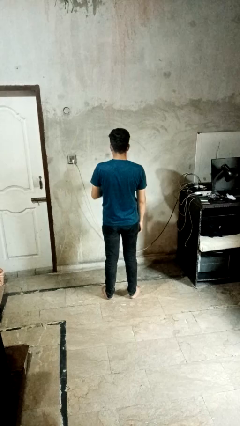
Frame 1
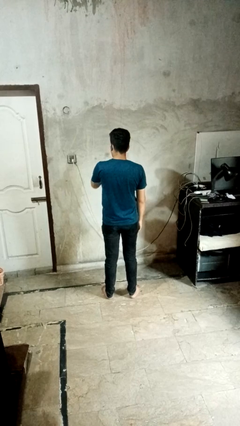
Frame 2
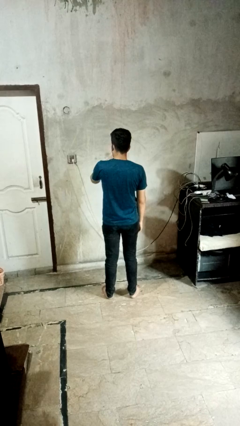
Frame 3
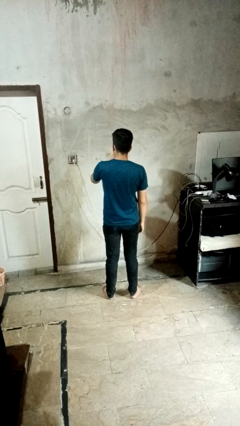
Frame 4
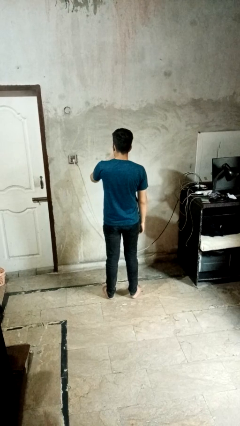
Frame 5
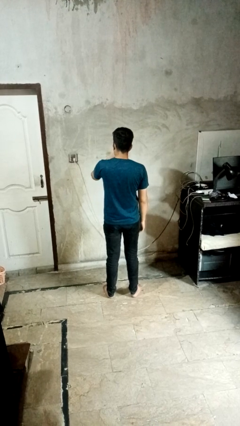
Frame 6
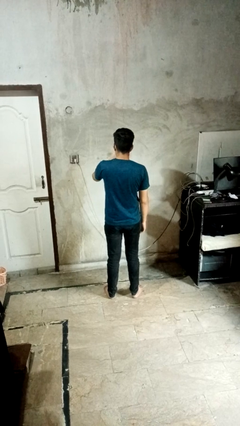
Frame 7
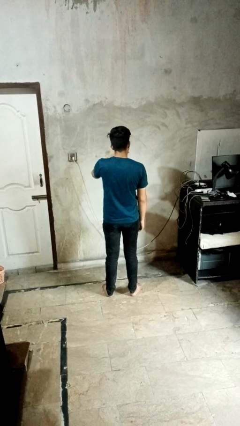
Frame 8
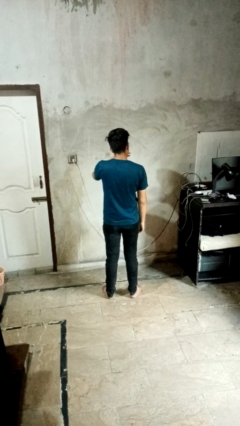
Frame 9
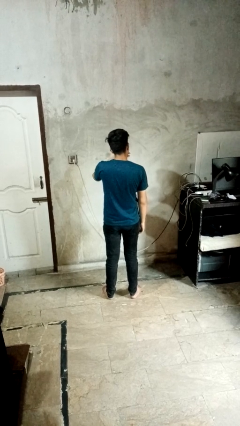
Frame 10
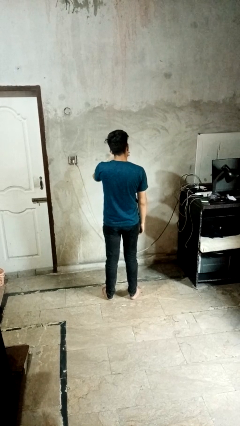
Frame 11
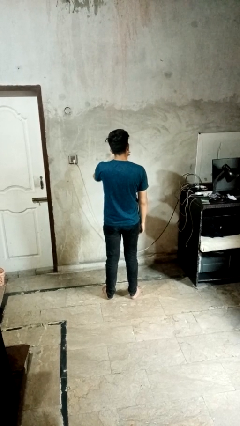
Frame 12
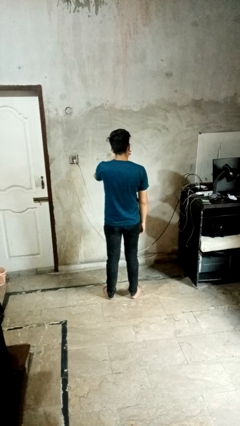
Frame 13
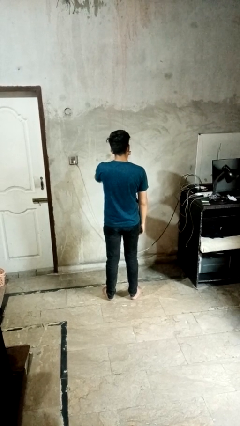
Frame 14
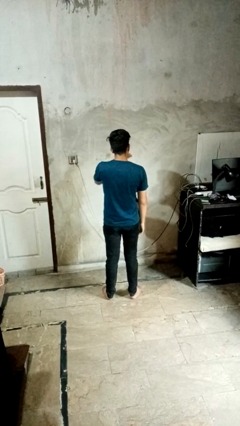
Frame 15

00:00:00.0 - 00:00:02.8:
person yawns

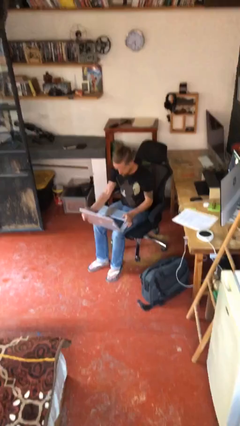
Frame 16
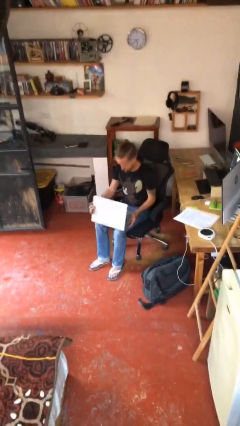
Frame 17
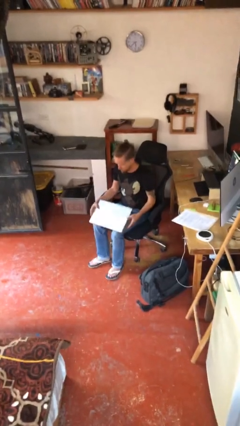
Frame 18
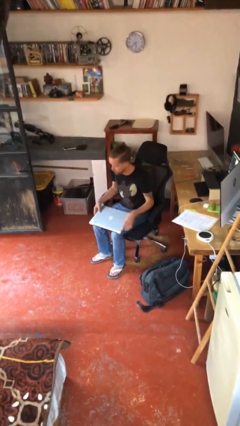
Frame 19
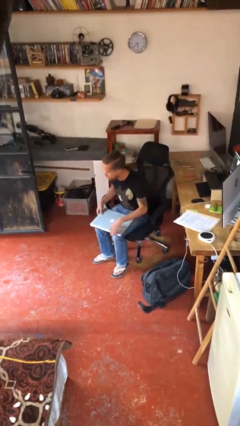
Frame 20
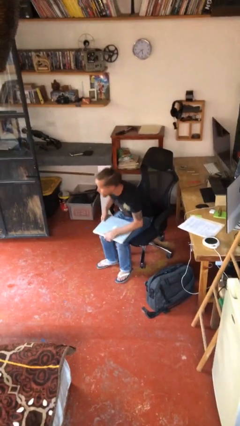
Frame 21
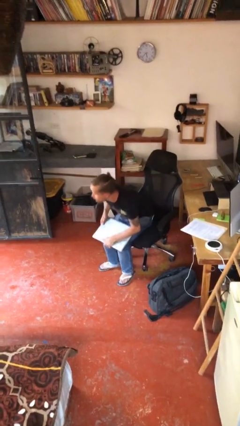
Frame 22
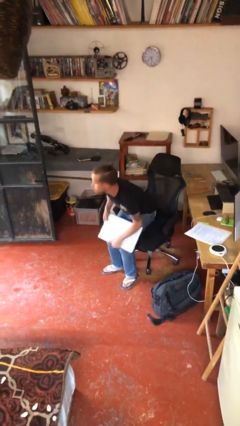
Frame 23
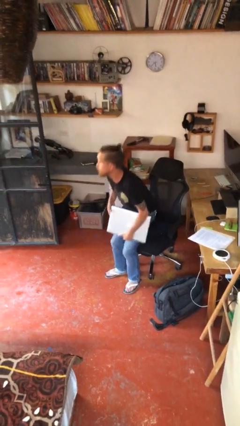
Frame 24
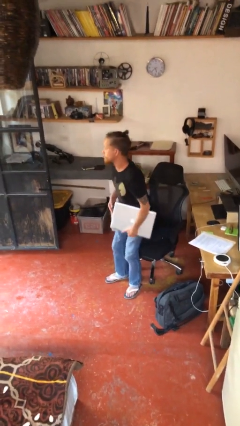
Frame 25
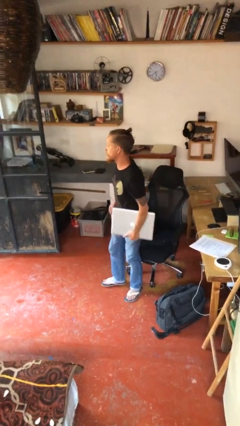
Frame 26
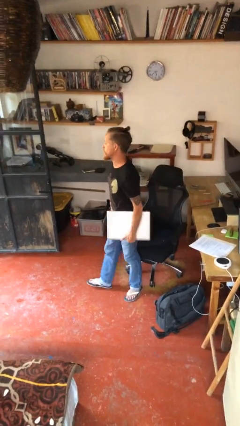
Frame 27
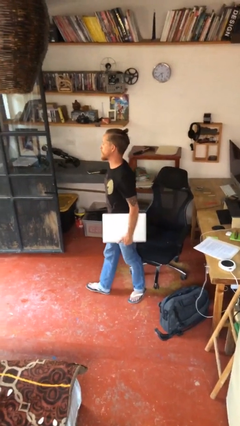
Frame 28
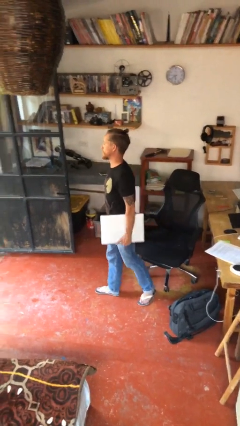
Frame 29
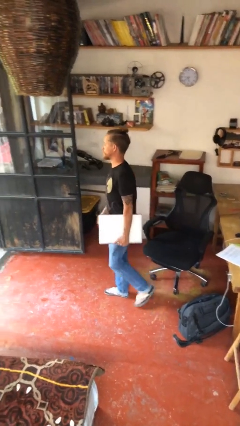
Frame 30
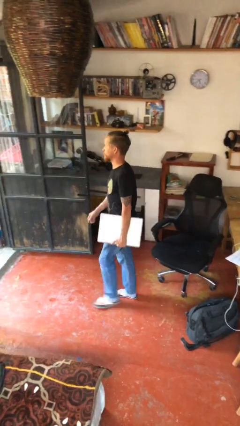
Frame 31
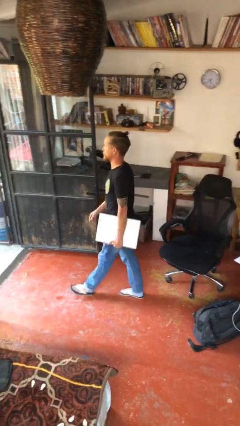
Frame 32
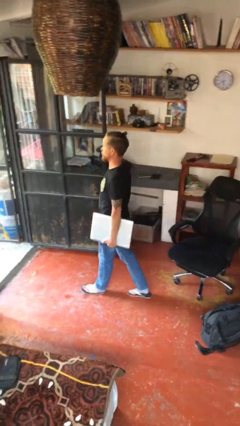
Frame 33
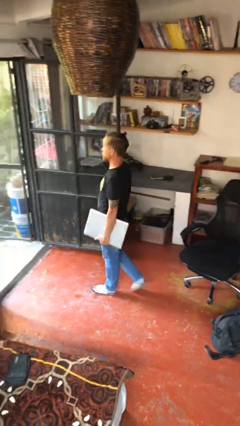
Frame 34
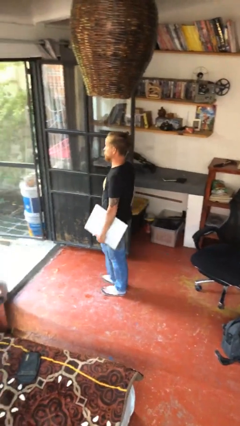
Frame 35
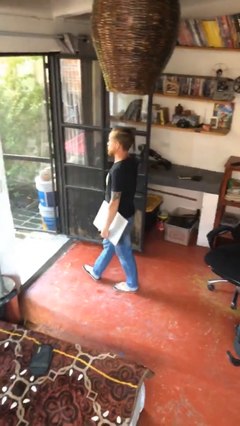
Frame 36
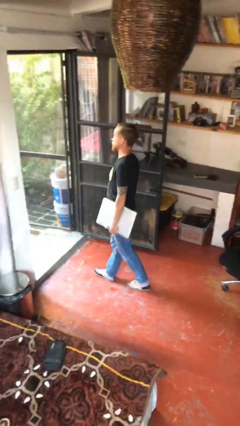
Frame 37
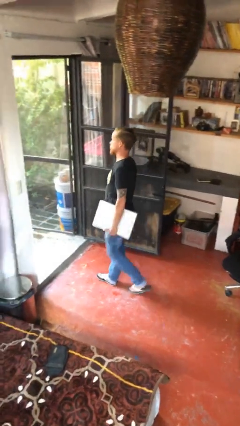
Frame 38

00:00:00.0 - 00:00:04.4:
person stands up

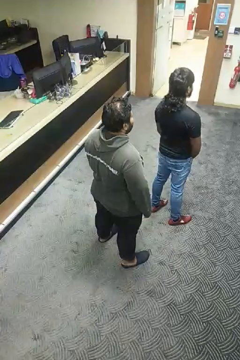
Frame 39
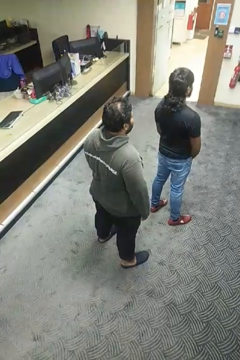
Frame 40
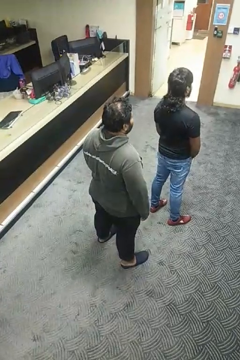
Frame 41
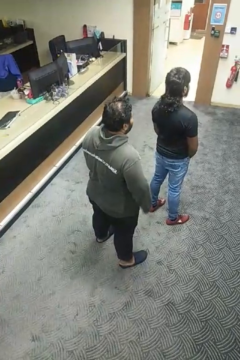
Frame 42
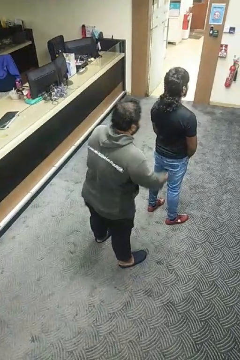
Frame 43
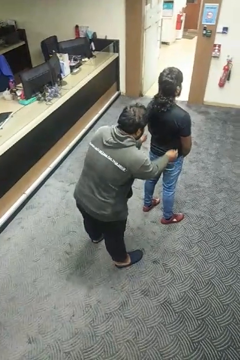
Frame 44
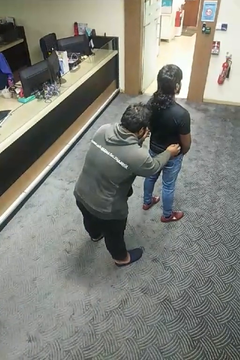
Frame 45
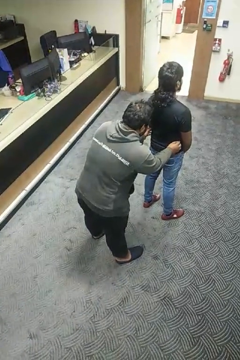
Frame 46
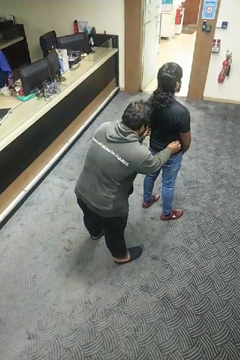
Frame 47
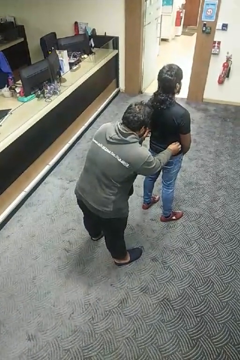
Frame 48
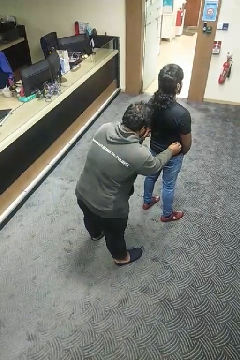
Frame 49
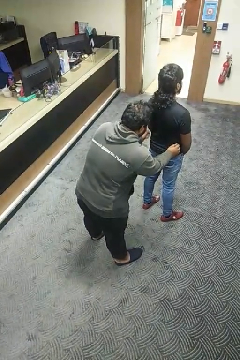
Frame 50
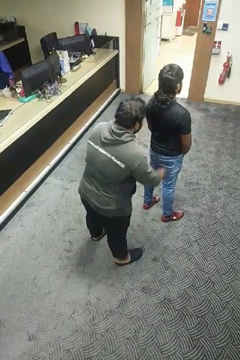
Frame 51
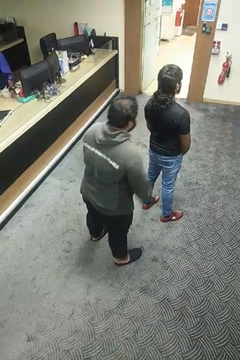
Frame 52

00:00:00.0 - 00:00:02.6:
person tickles person

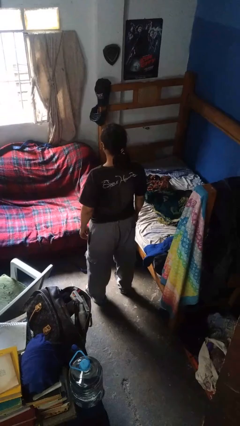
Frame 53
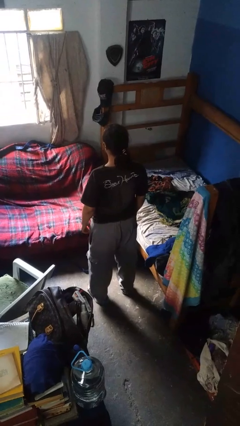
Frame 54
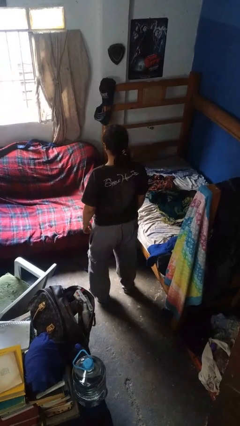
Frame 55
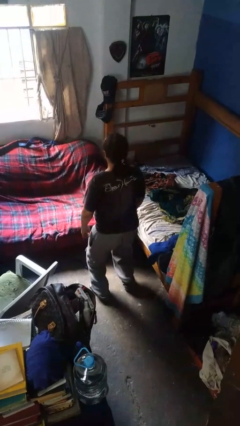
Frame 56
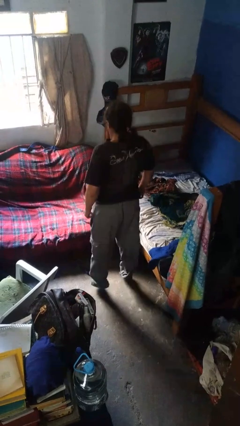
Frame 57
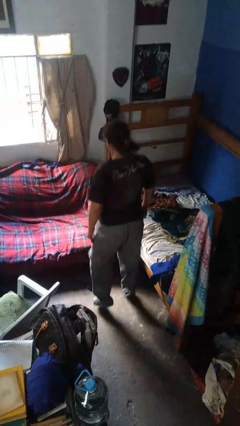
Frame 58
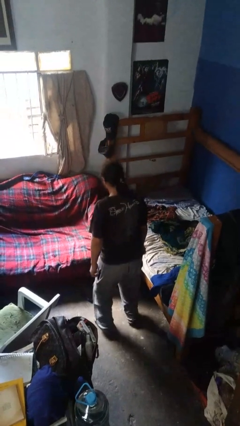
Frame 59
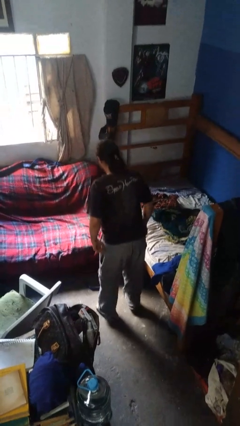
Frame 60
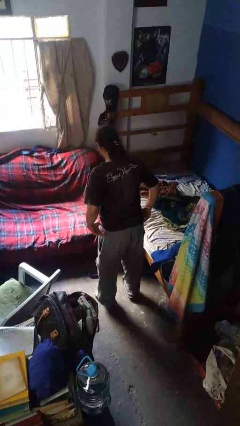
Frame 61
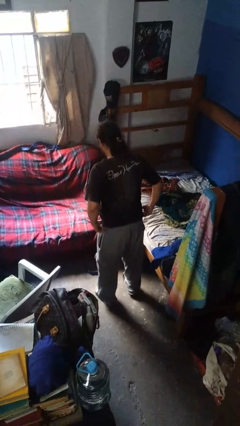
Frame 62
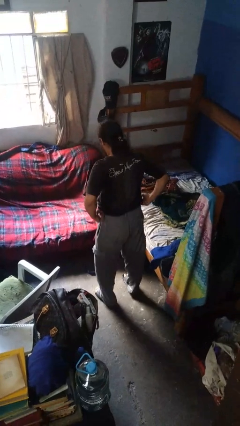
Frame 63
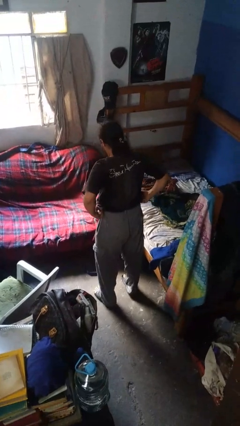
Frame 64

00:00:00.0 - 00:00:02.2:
person jumps

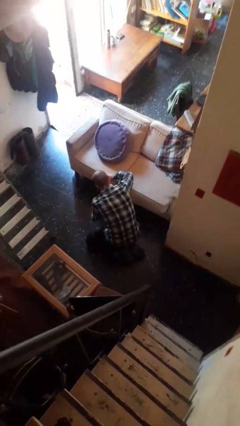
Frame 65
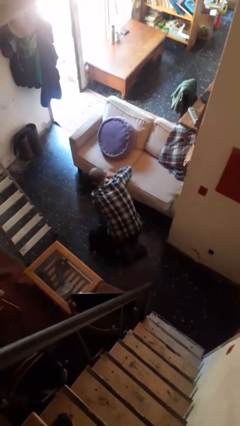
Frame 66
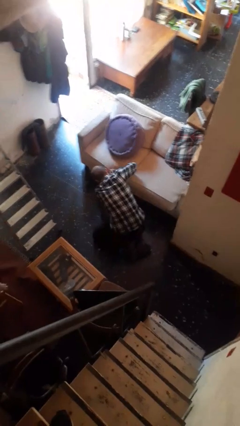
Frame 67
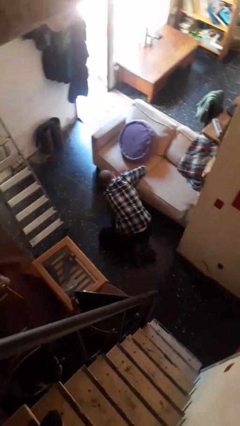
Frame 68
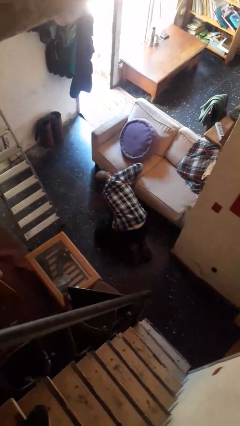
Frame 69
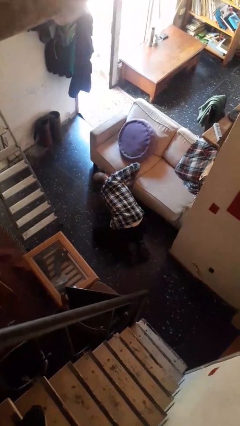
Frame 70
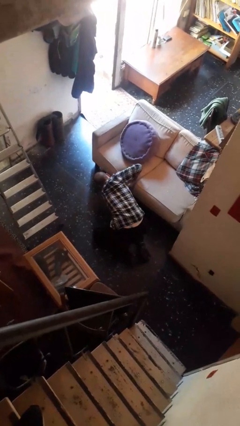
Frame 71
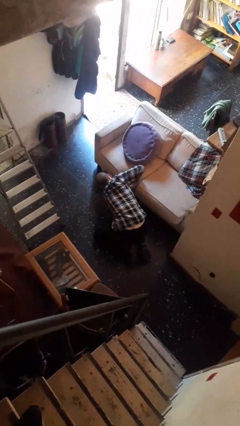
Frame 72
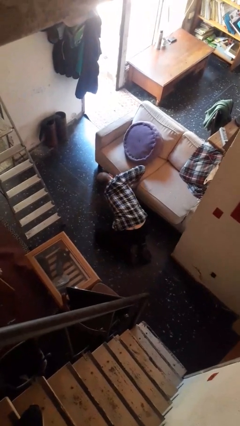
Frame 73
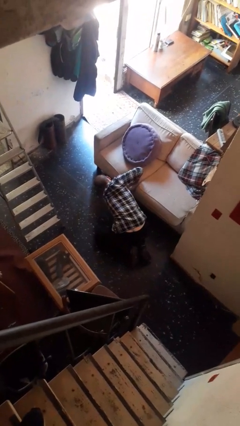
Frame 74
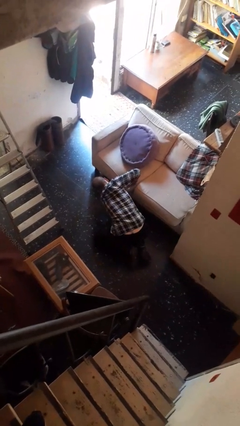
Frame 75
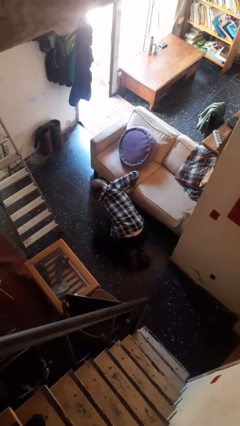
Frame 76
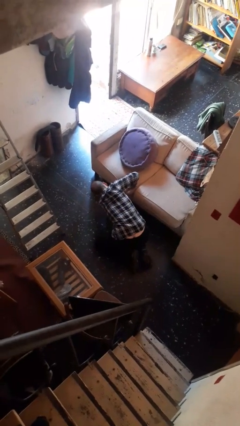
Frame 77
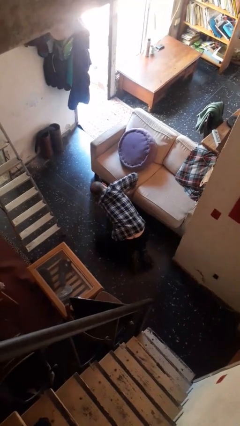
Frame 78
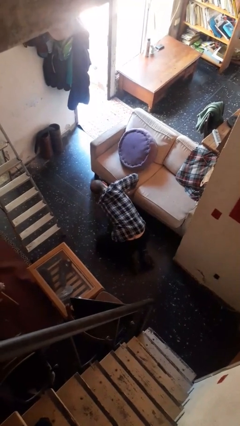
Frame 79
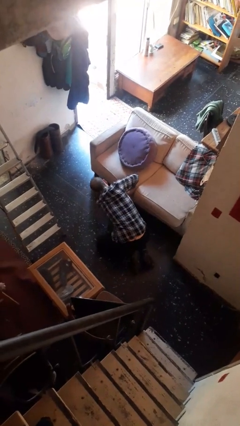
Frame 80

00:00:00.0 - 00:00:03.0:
person searches under couch

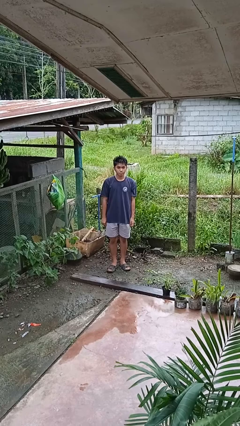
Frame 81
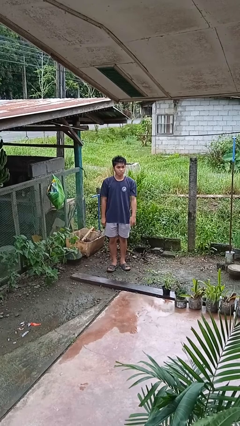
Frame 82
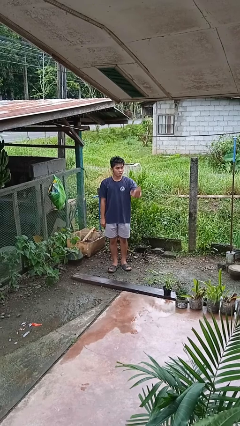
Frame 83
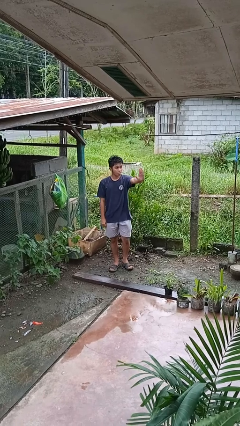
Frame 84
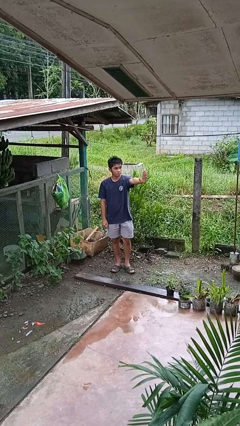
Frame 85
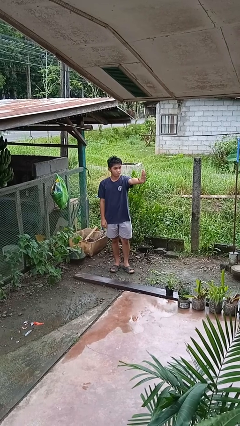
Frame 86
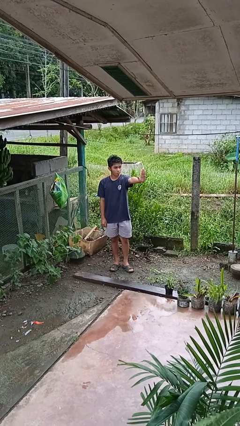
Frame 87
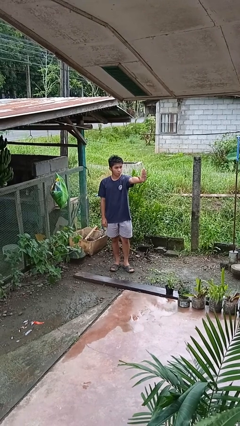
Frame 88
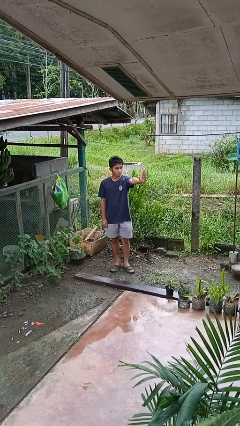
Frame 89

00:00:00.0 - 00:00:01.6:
person gestures stop

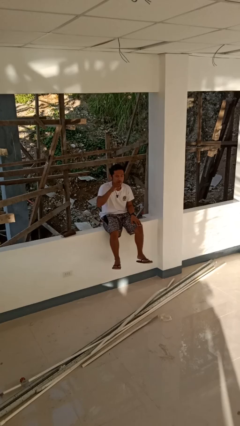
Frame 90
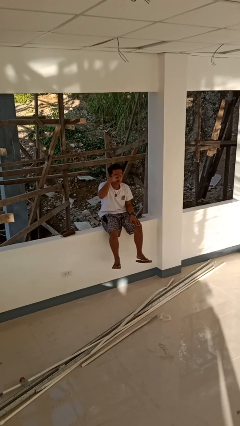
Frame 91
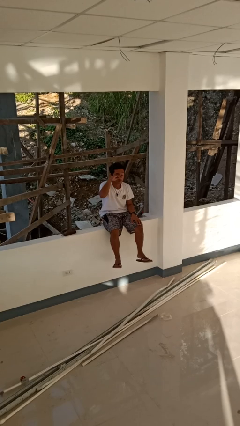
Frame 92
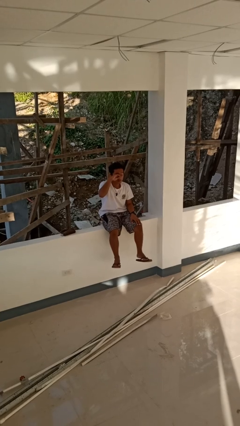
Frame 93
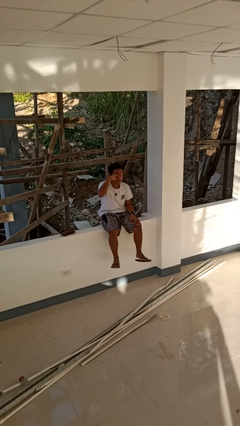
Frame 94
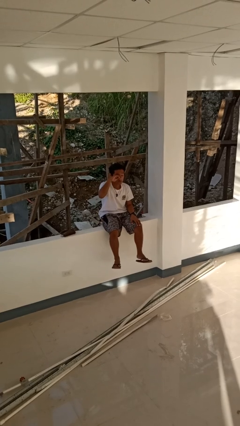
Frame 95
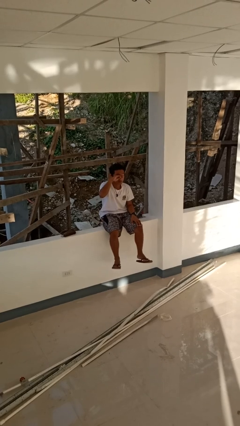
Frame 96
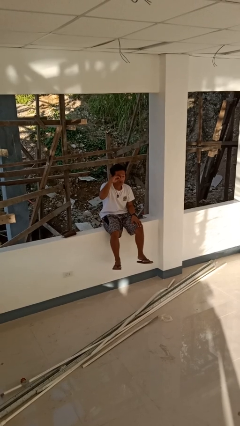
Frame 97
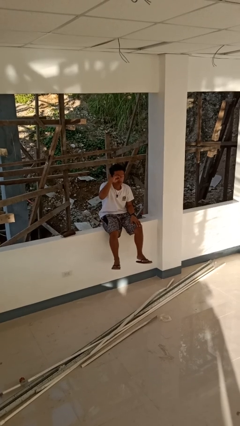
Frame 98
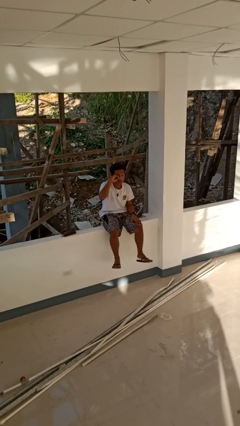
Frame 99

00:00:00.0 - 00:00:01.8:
person rubs eyes
